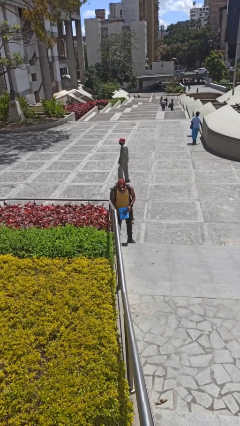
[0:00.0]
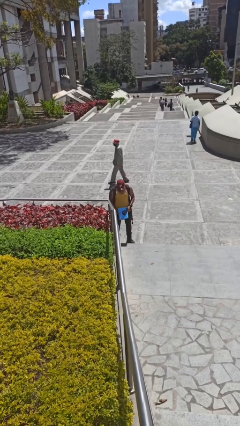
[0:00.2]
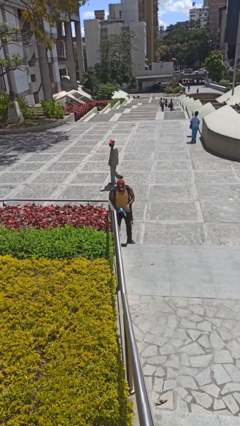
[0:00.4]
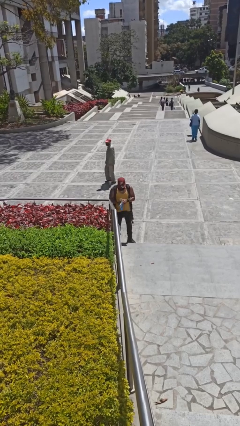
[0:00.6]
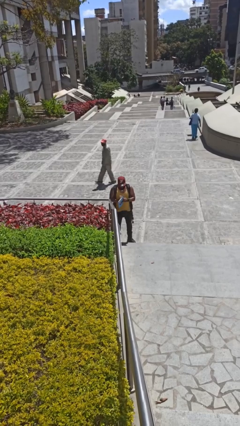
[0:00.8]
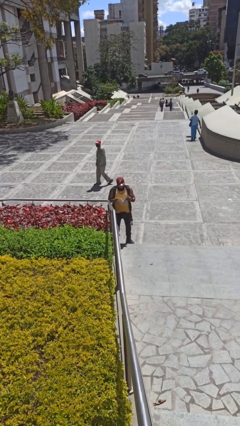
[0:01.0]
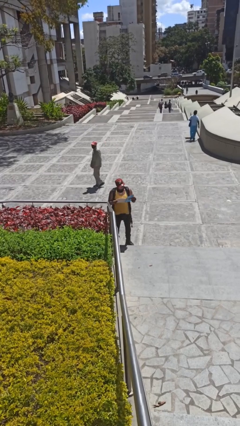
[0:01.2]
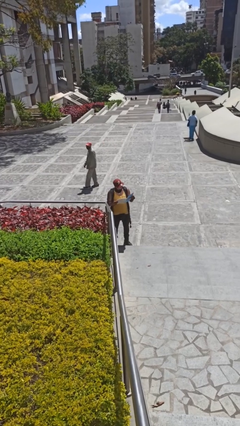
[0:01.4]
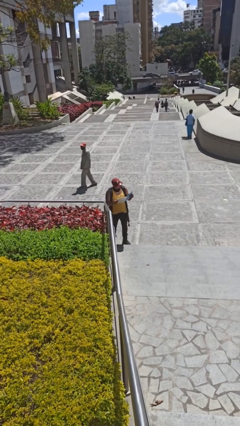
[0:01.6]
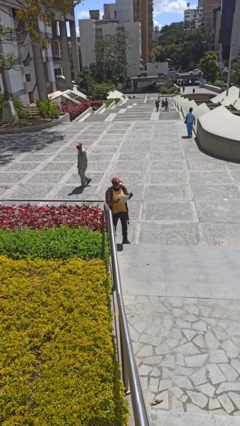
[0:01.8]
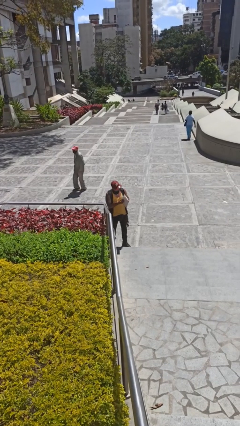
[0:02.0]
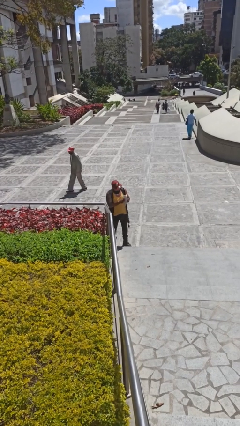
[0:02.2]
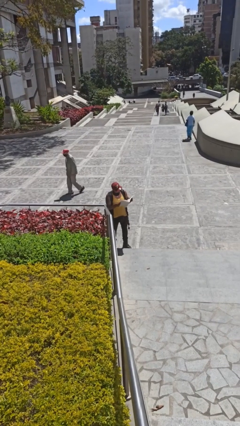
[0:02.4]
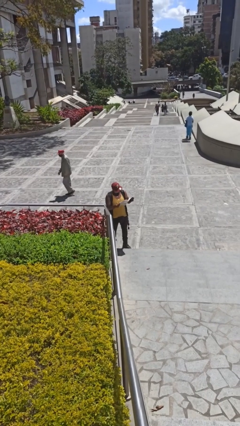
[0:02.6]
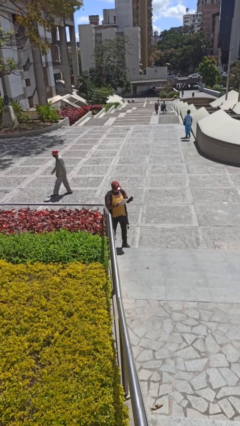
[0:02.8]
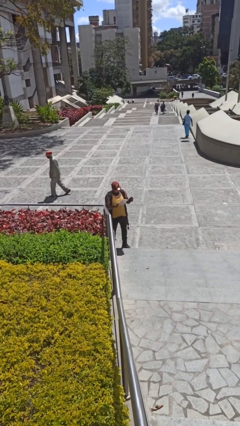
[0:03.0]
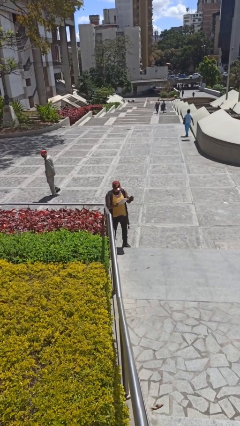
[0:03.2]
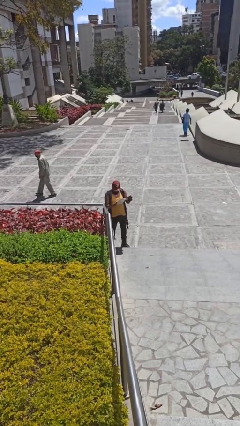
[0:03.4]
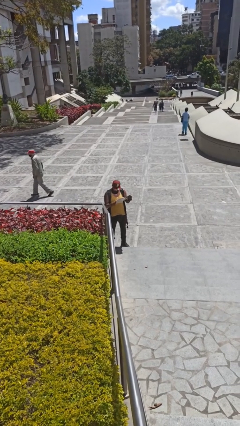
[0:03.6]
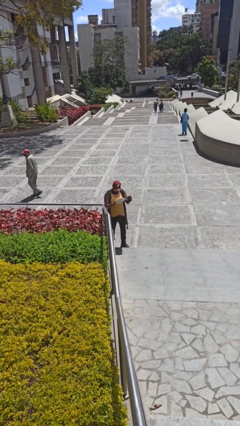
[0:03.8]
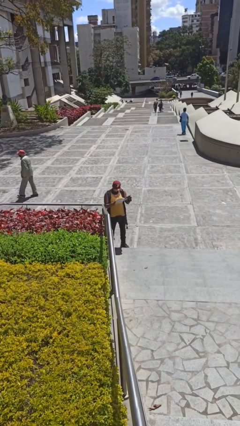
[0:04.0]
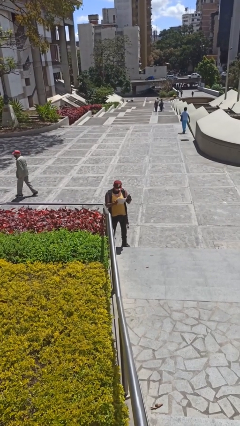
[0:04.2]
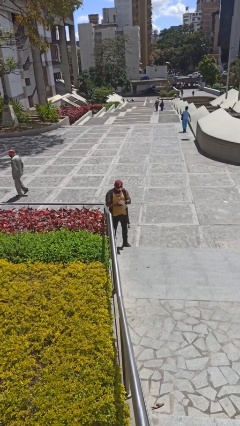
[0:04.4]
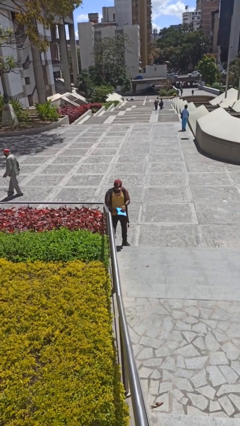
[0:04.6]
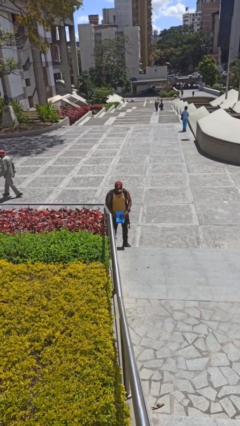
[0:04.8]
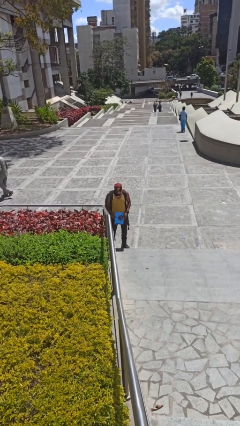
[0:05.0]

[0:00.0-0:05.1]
person reads document

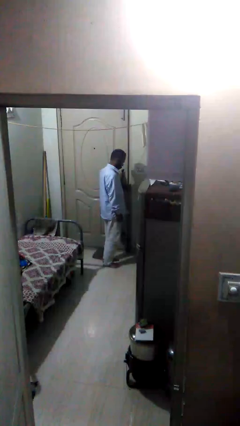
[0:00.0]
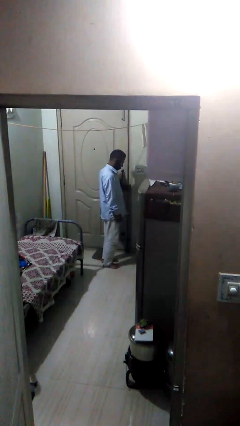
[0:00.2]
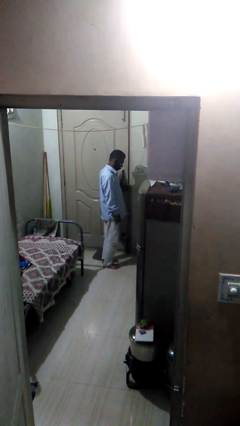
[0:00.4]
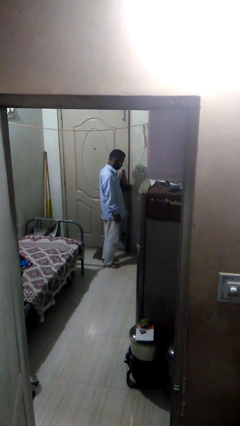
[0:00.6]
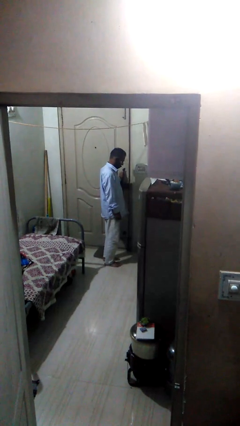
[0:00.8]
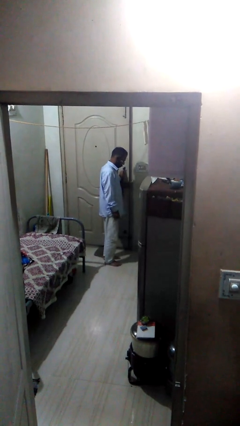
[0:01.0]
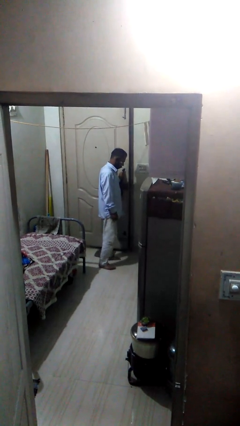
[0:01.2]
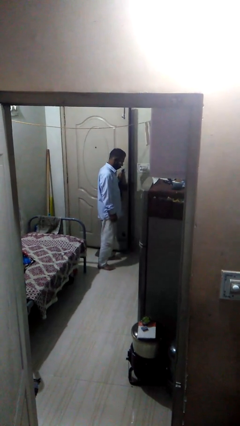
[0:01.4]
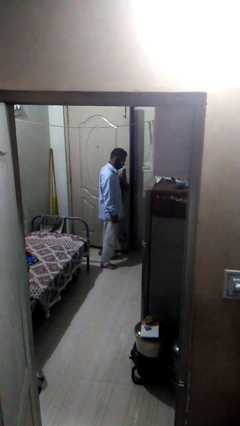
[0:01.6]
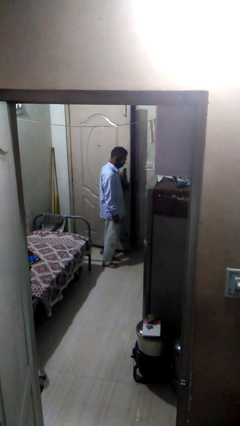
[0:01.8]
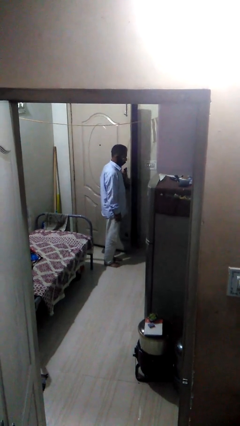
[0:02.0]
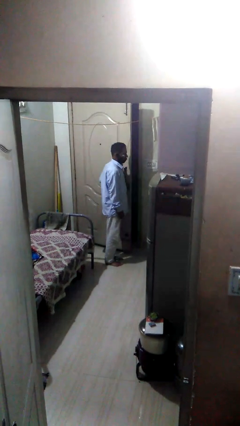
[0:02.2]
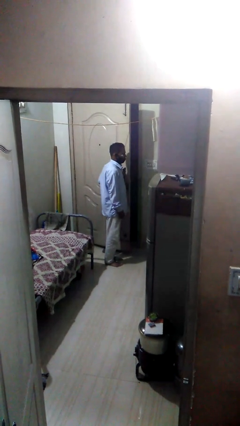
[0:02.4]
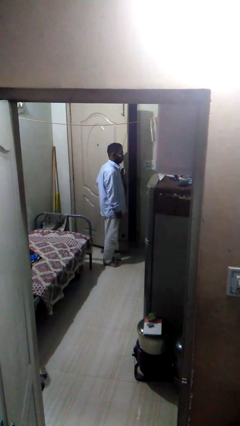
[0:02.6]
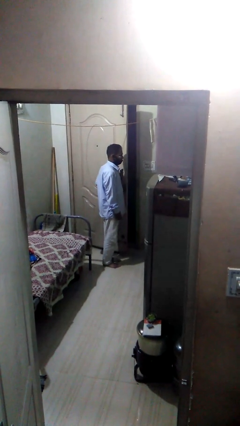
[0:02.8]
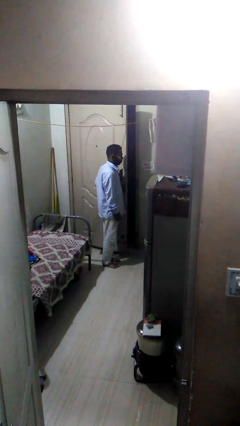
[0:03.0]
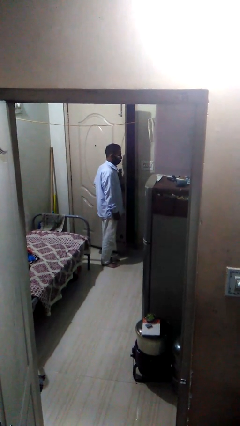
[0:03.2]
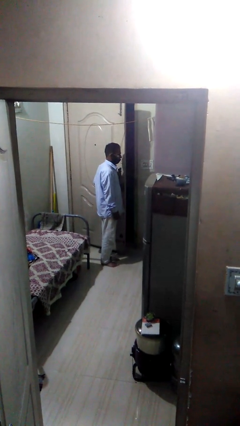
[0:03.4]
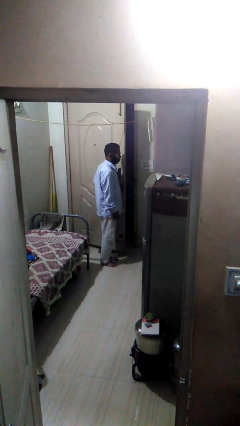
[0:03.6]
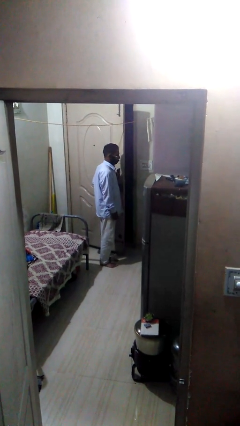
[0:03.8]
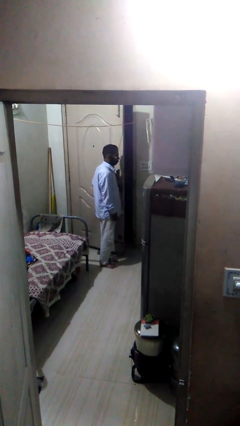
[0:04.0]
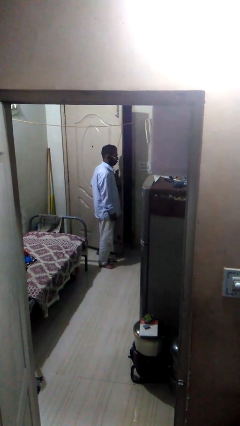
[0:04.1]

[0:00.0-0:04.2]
person opens facility door

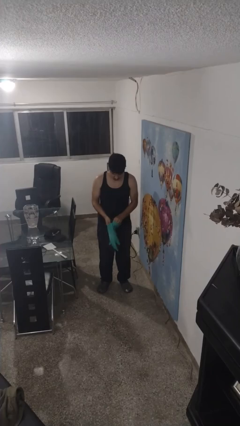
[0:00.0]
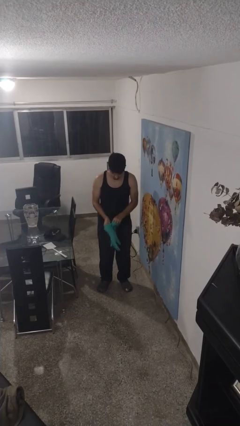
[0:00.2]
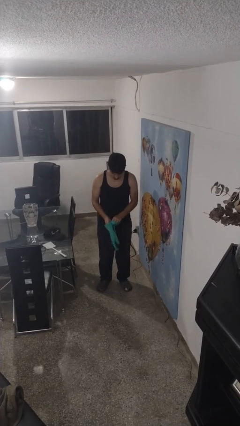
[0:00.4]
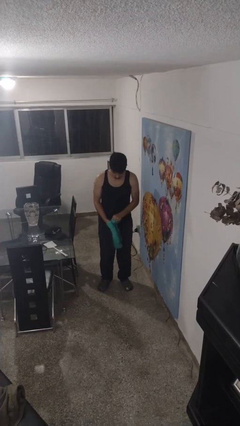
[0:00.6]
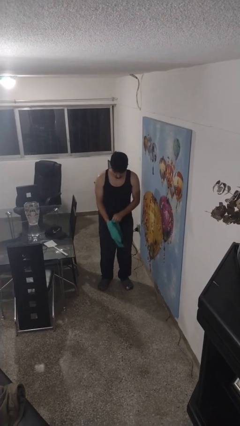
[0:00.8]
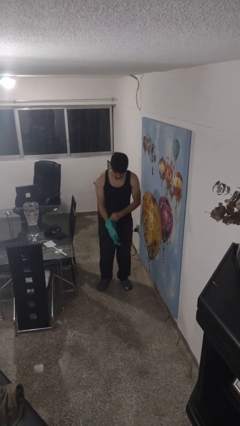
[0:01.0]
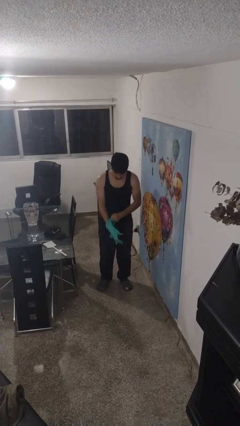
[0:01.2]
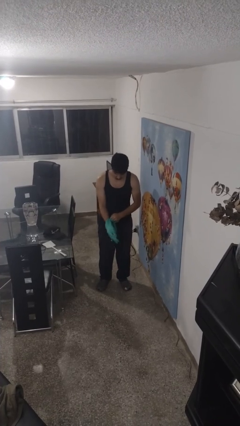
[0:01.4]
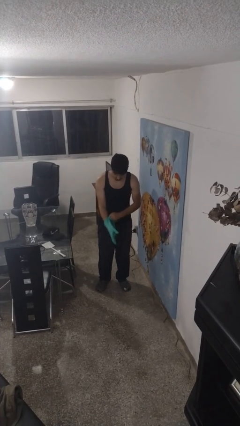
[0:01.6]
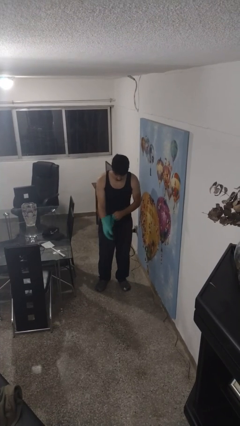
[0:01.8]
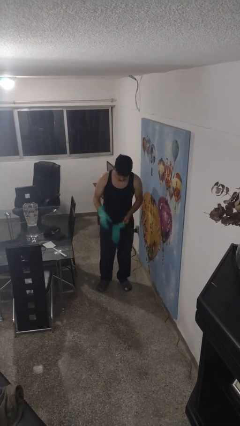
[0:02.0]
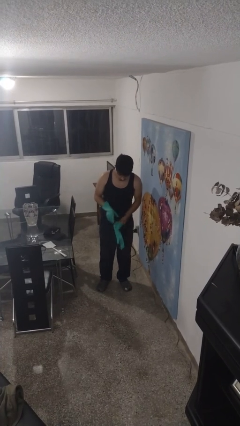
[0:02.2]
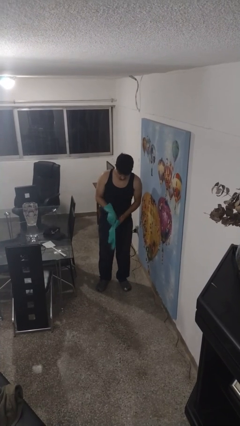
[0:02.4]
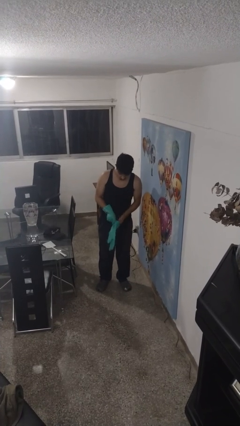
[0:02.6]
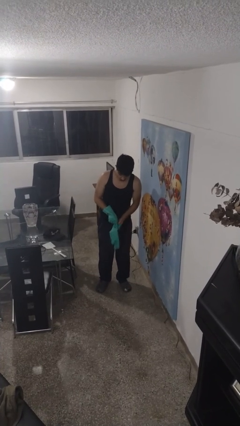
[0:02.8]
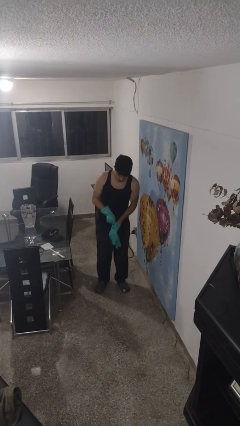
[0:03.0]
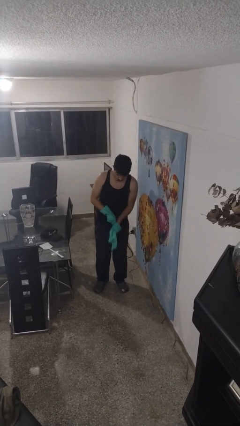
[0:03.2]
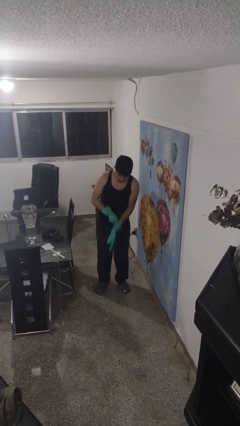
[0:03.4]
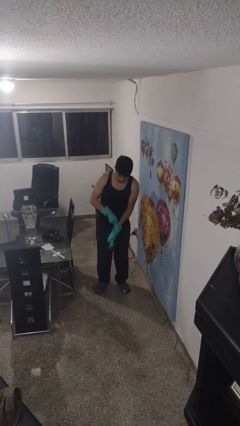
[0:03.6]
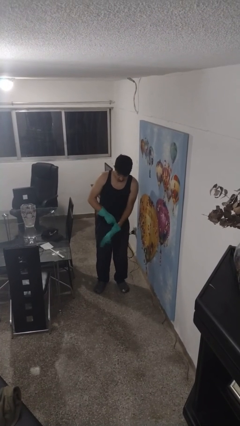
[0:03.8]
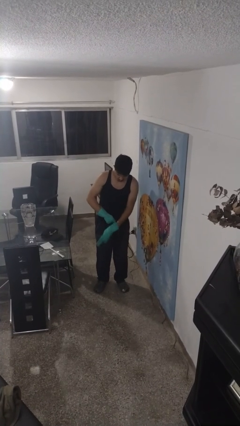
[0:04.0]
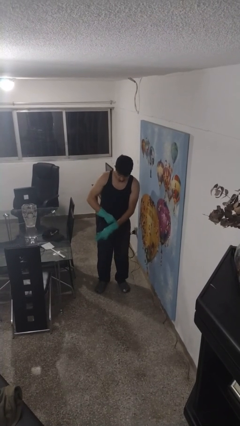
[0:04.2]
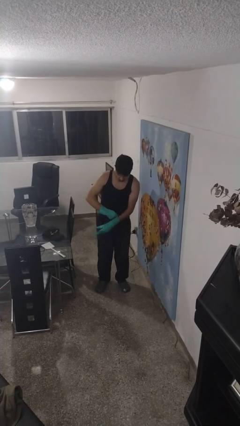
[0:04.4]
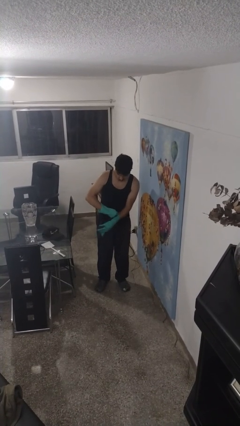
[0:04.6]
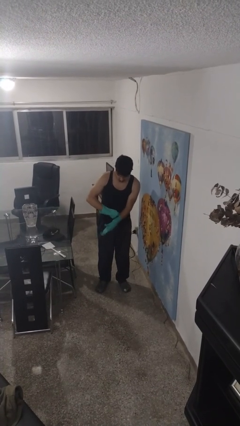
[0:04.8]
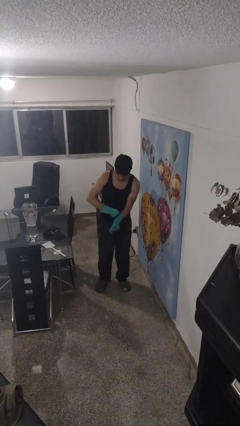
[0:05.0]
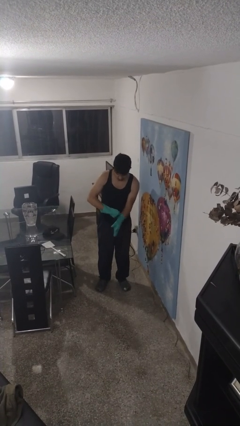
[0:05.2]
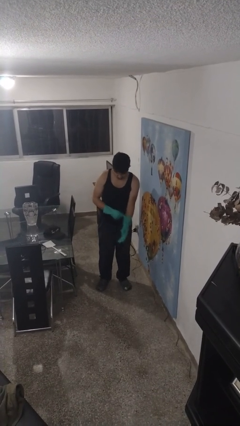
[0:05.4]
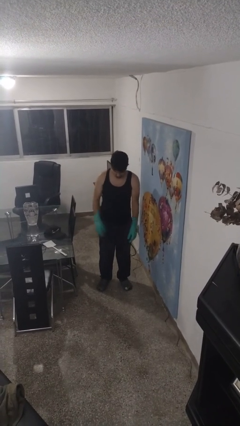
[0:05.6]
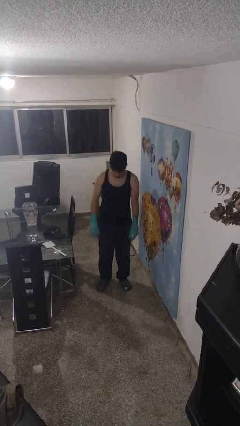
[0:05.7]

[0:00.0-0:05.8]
person puts on gloves

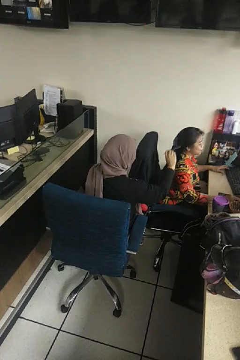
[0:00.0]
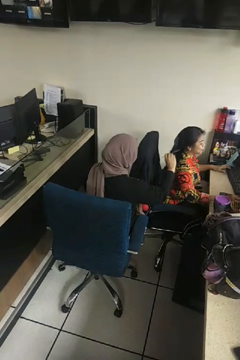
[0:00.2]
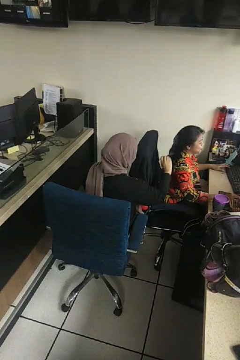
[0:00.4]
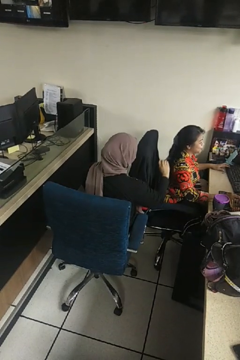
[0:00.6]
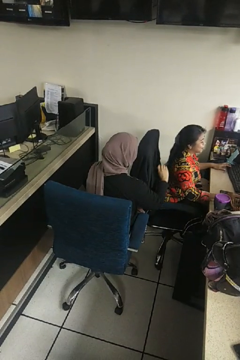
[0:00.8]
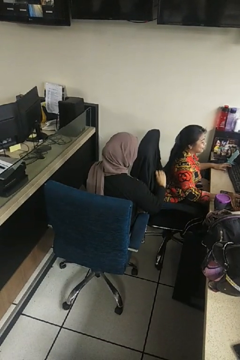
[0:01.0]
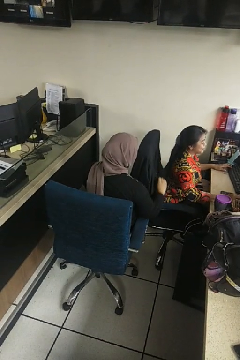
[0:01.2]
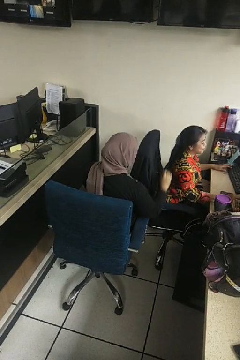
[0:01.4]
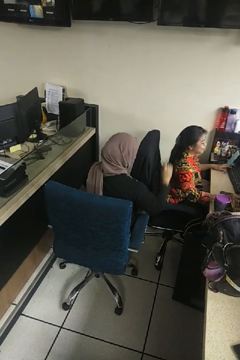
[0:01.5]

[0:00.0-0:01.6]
person brushes hair of person

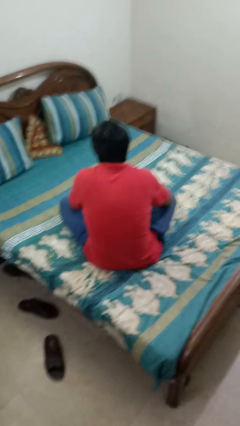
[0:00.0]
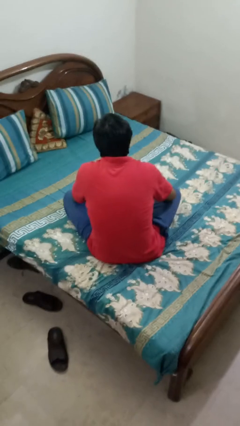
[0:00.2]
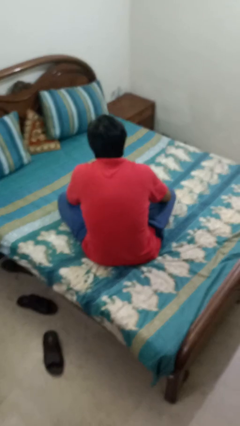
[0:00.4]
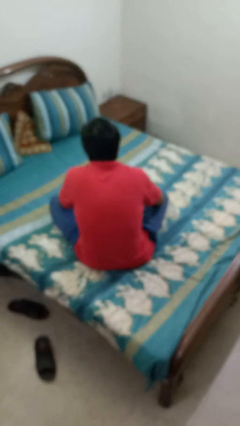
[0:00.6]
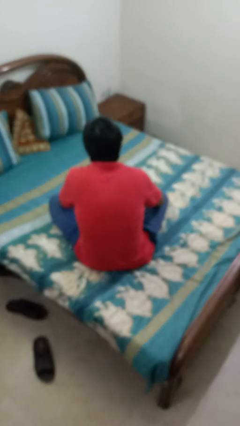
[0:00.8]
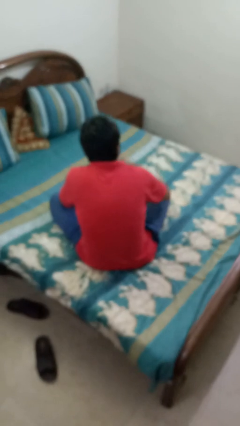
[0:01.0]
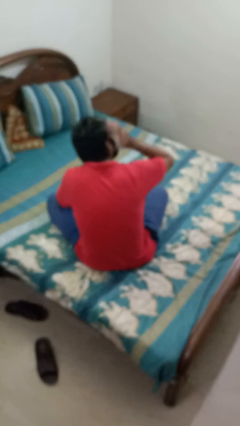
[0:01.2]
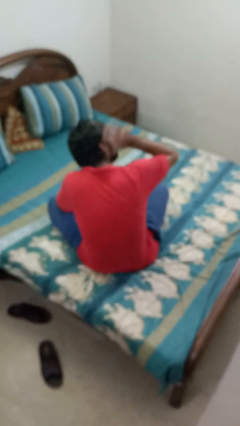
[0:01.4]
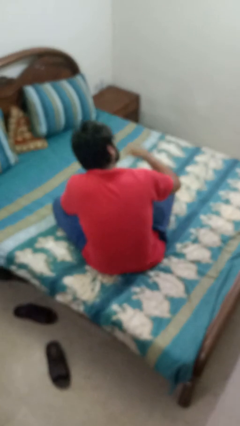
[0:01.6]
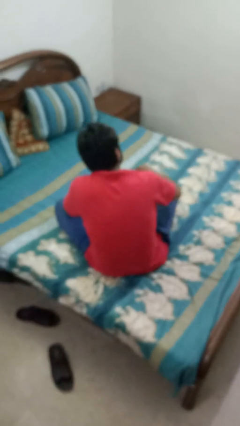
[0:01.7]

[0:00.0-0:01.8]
person swats bug
